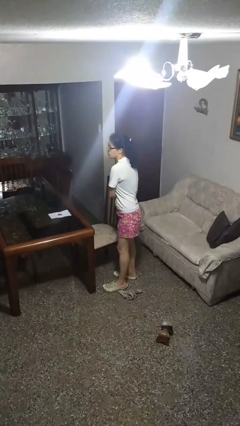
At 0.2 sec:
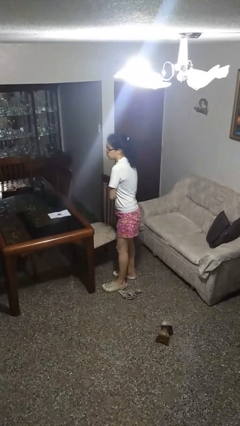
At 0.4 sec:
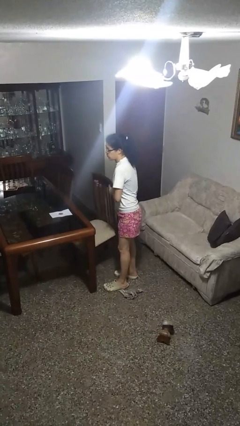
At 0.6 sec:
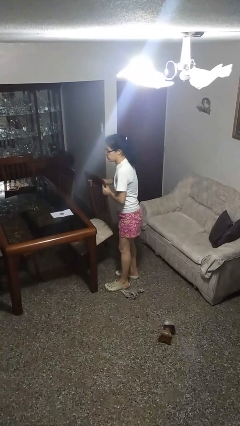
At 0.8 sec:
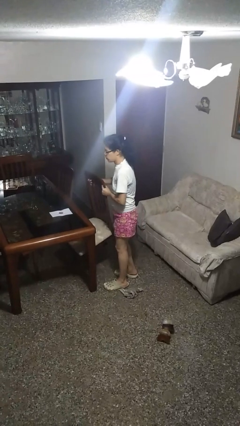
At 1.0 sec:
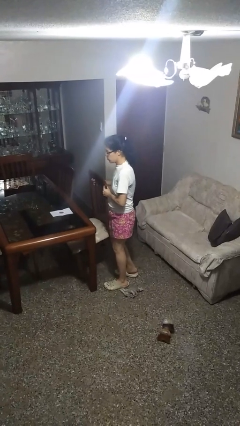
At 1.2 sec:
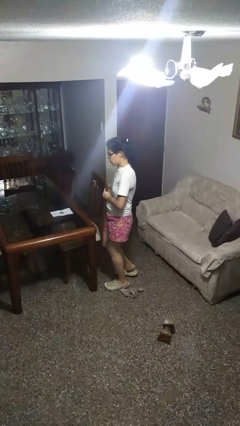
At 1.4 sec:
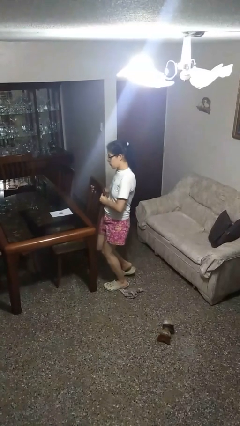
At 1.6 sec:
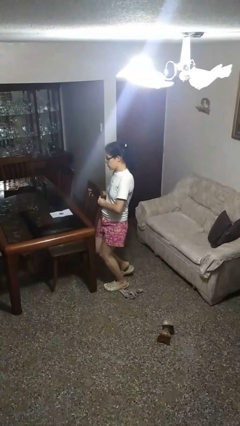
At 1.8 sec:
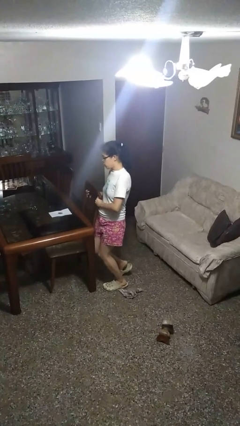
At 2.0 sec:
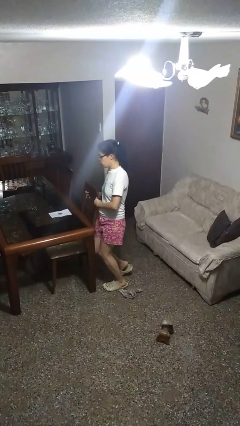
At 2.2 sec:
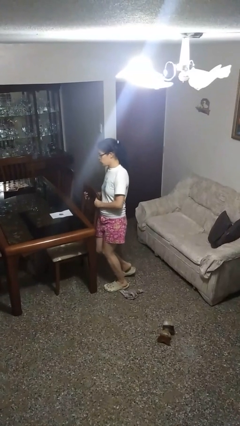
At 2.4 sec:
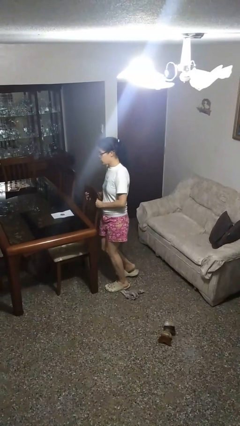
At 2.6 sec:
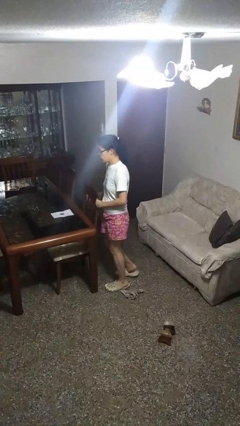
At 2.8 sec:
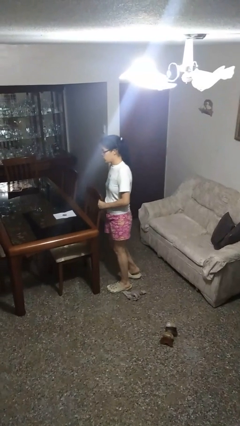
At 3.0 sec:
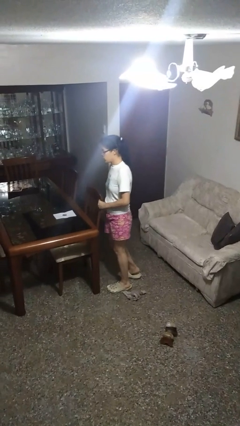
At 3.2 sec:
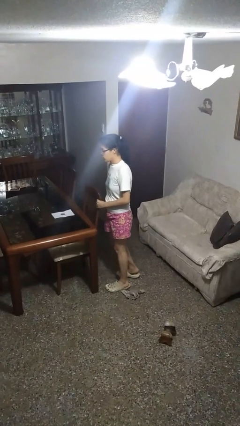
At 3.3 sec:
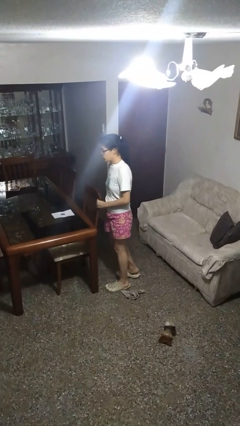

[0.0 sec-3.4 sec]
person pushes in chair

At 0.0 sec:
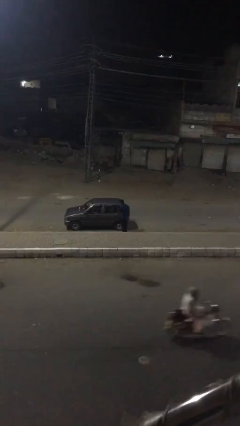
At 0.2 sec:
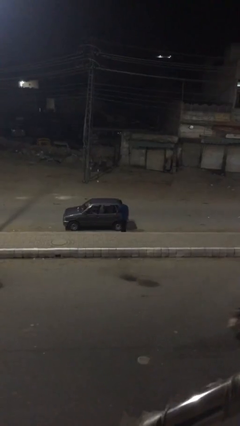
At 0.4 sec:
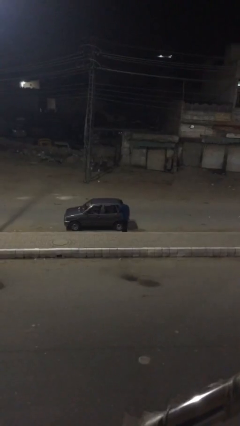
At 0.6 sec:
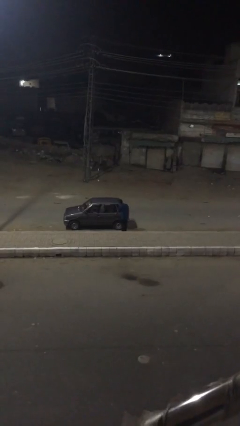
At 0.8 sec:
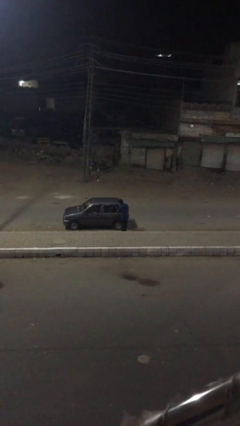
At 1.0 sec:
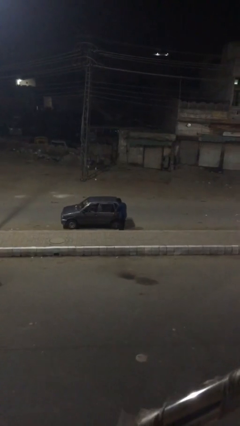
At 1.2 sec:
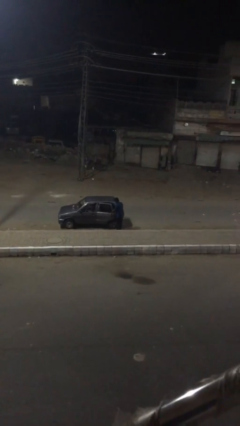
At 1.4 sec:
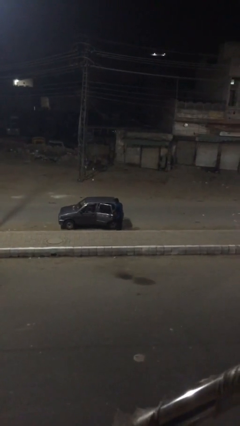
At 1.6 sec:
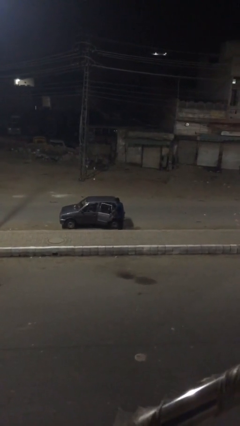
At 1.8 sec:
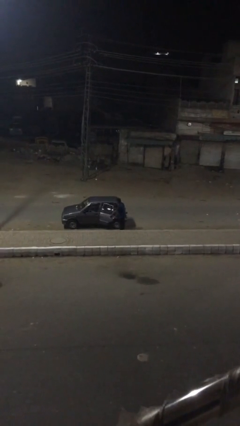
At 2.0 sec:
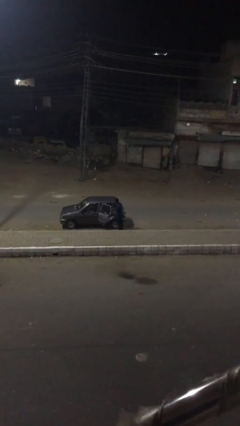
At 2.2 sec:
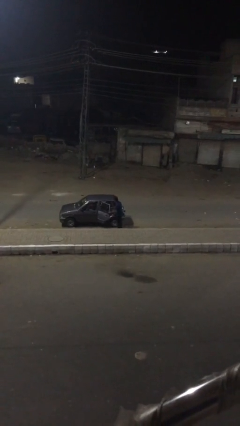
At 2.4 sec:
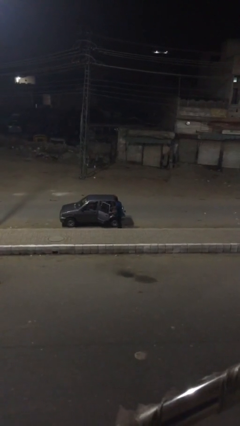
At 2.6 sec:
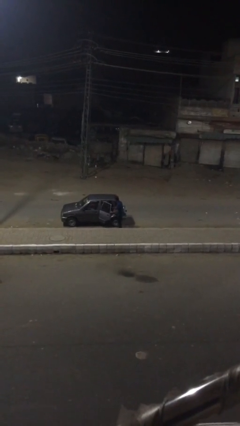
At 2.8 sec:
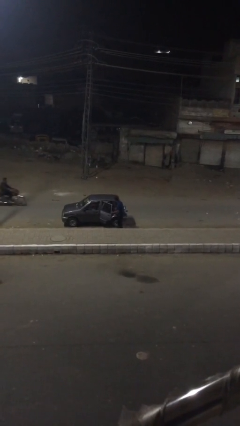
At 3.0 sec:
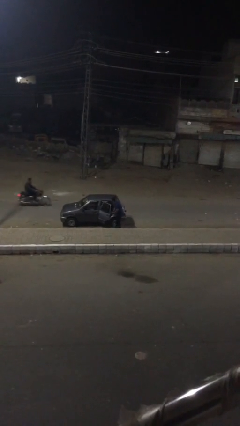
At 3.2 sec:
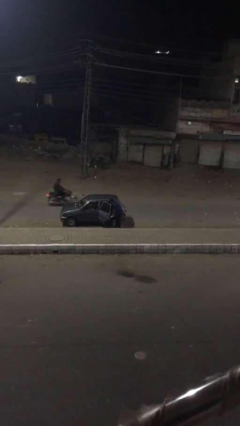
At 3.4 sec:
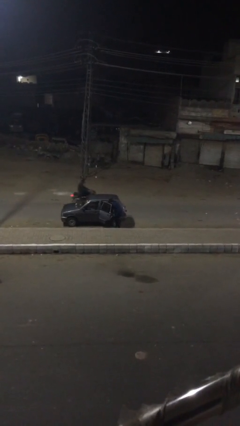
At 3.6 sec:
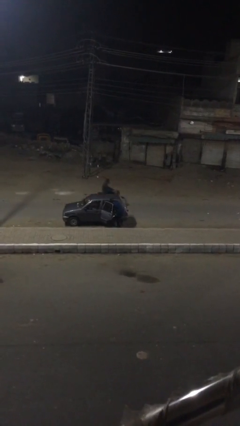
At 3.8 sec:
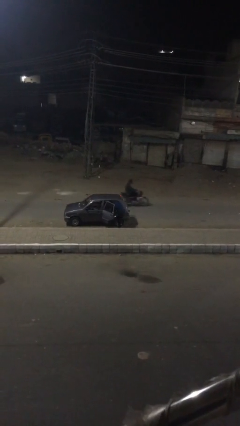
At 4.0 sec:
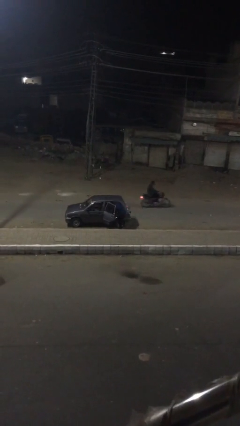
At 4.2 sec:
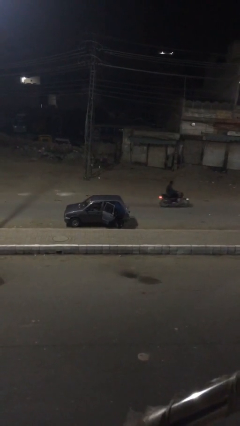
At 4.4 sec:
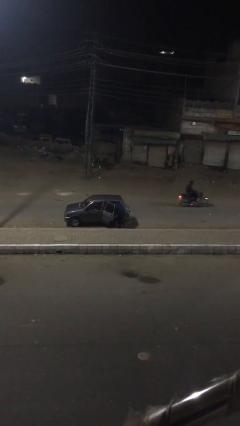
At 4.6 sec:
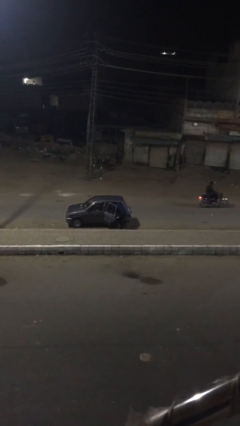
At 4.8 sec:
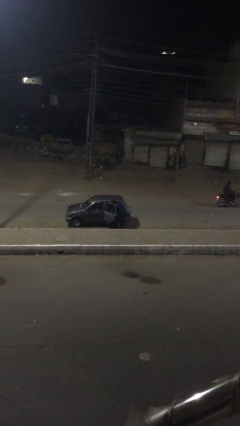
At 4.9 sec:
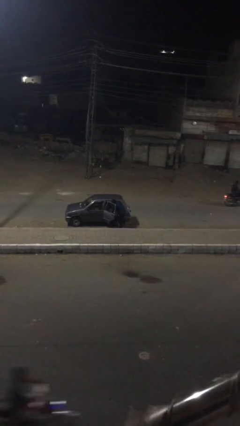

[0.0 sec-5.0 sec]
person opens car door

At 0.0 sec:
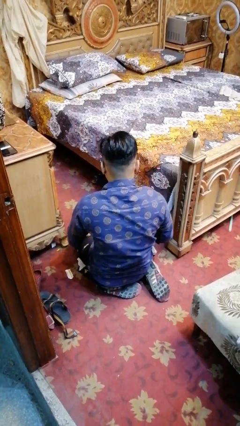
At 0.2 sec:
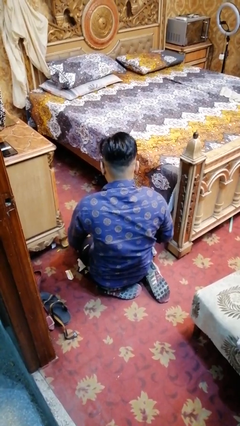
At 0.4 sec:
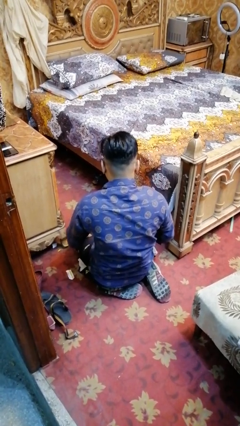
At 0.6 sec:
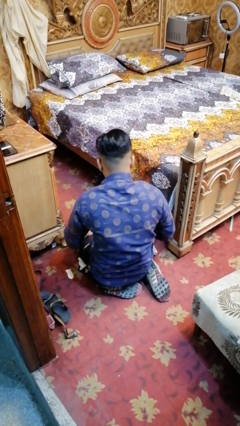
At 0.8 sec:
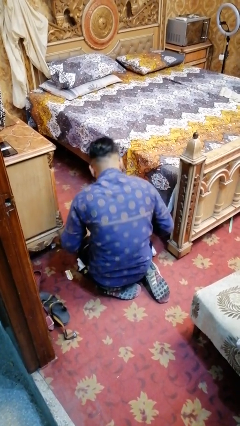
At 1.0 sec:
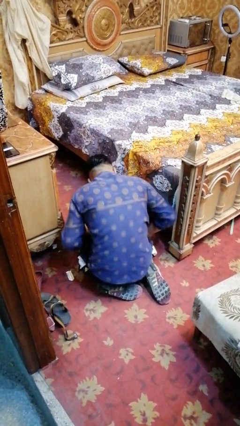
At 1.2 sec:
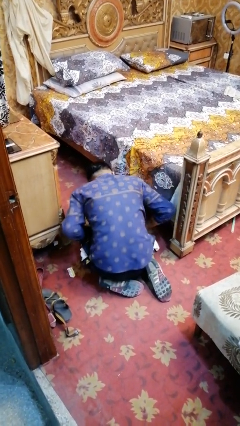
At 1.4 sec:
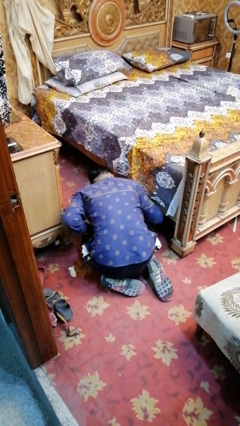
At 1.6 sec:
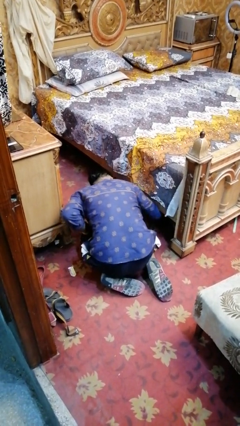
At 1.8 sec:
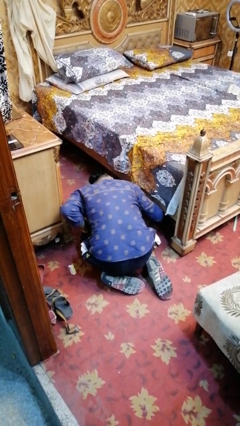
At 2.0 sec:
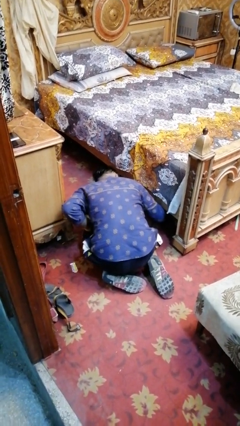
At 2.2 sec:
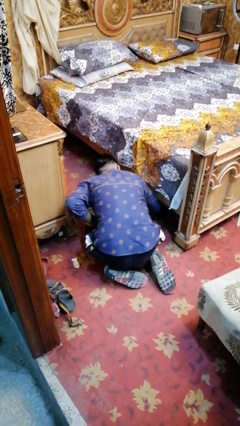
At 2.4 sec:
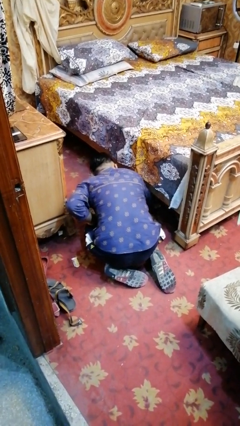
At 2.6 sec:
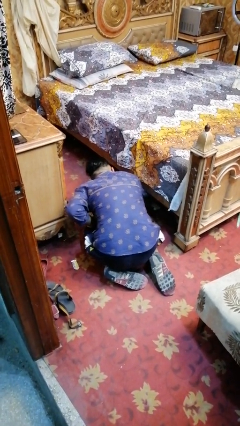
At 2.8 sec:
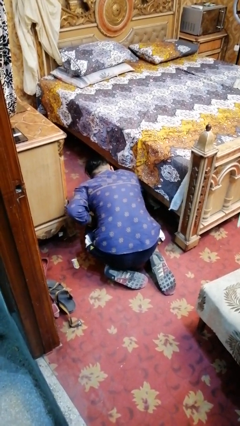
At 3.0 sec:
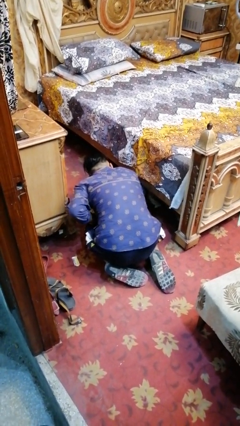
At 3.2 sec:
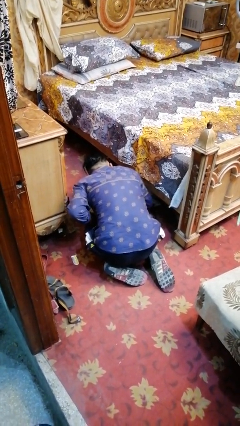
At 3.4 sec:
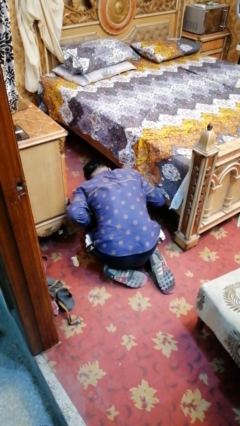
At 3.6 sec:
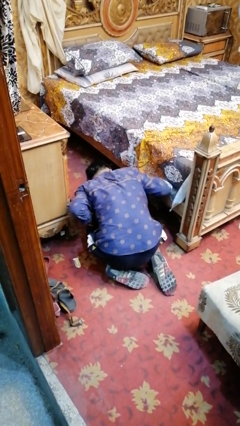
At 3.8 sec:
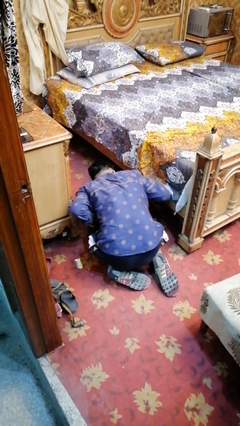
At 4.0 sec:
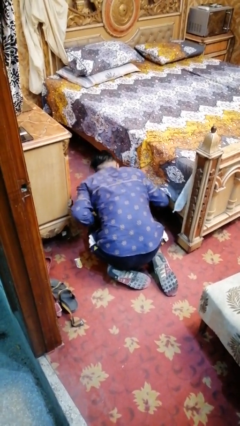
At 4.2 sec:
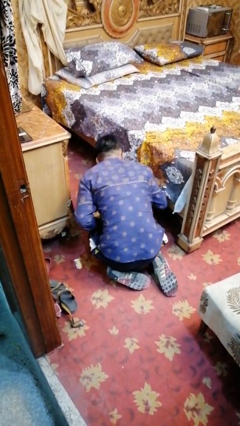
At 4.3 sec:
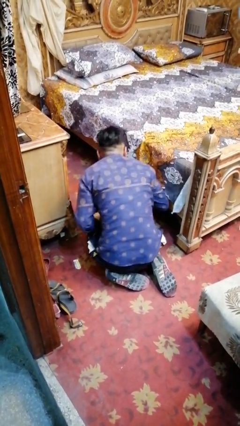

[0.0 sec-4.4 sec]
person searches under bed

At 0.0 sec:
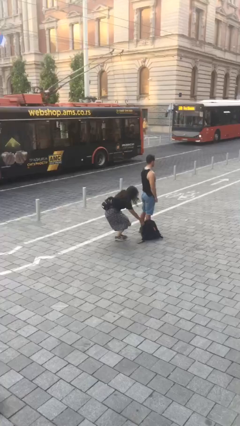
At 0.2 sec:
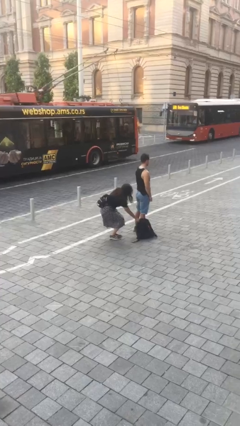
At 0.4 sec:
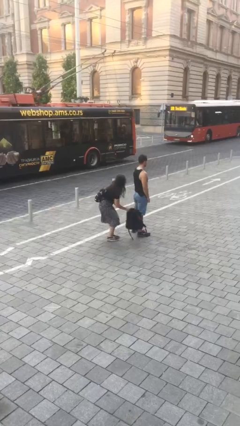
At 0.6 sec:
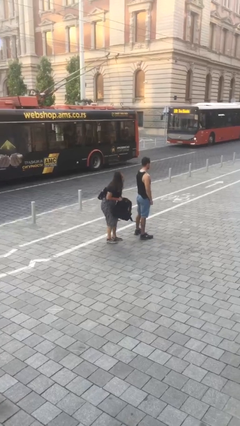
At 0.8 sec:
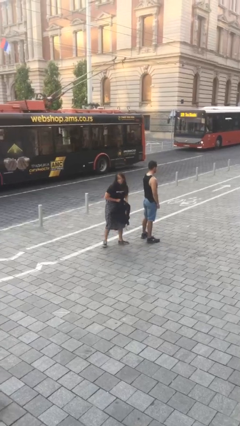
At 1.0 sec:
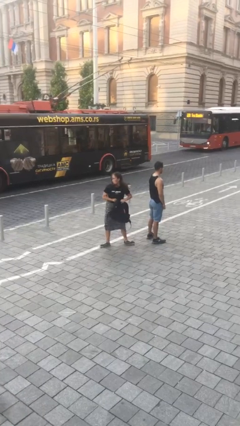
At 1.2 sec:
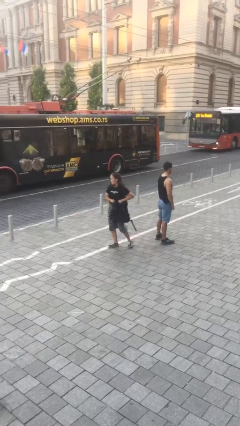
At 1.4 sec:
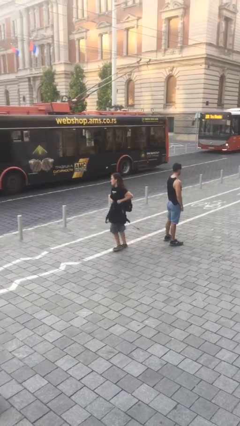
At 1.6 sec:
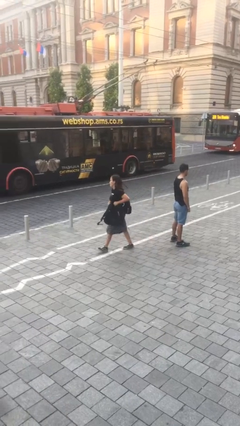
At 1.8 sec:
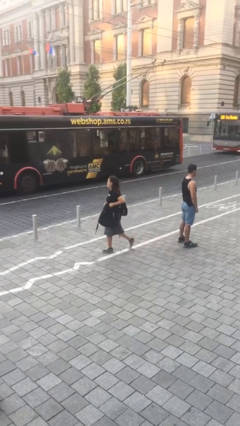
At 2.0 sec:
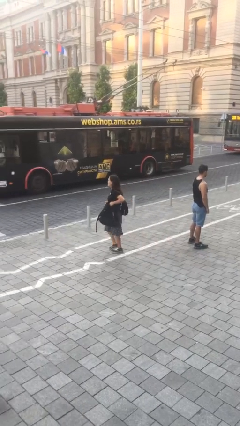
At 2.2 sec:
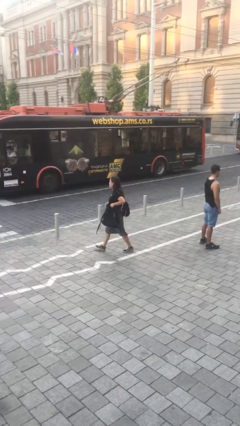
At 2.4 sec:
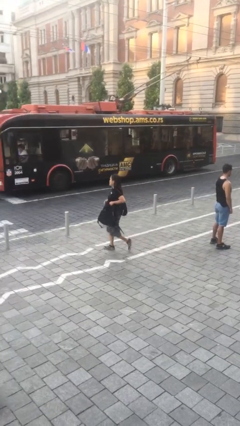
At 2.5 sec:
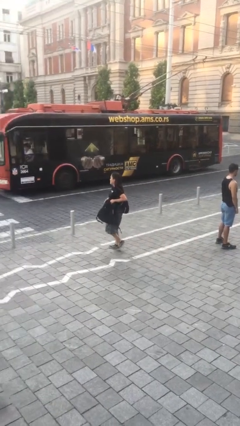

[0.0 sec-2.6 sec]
person steals object from person

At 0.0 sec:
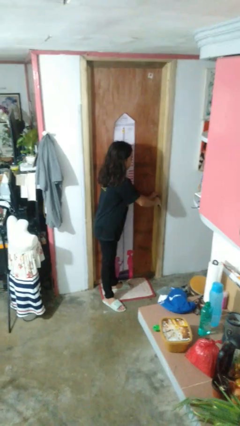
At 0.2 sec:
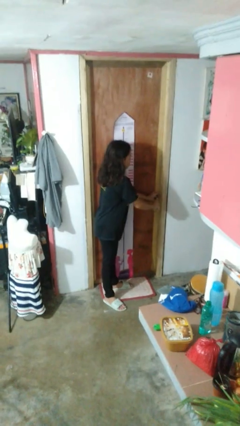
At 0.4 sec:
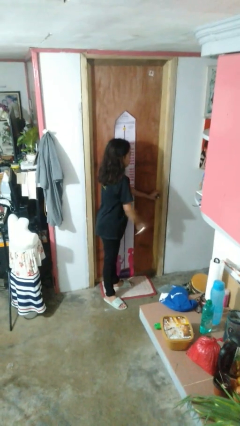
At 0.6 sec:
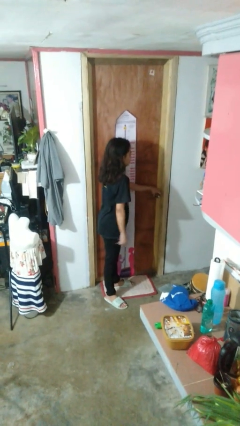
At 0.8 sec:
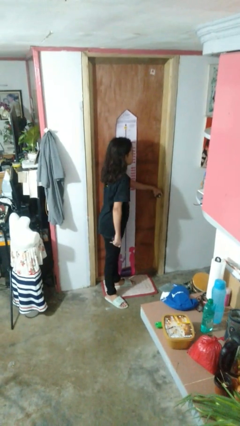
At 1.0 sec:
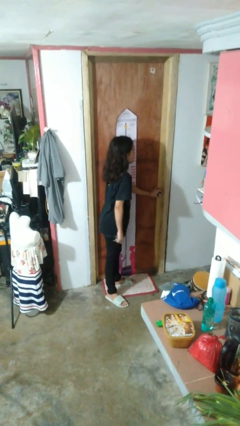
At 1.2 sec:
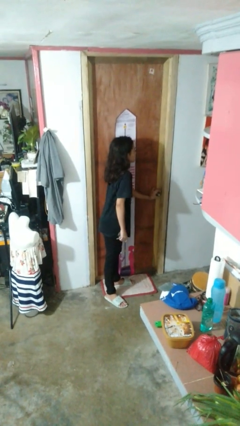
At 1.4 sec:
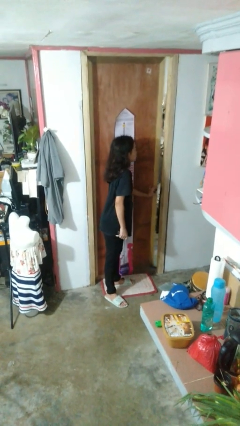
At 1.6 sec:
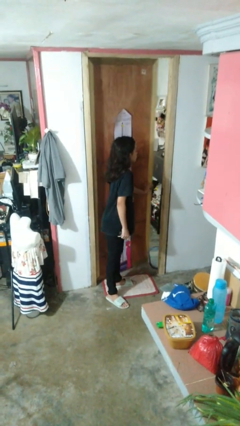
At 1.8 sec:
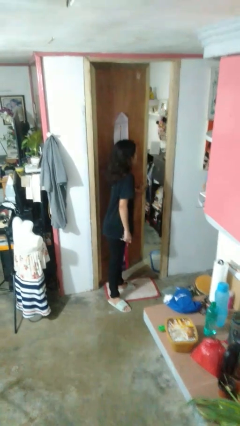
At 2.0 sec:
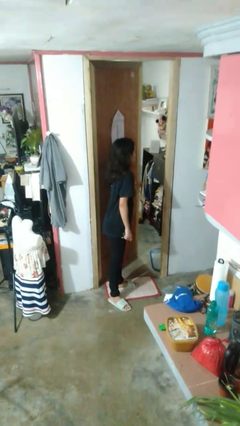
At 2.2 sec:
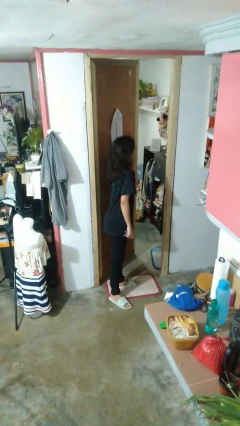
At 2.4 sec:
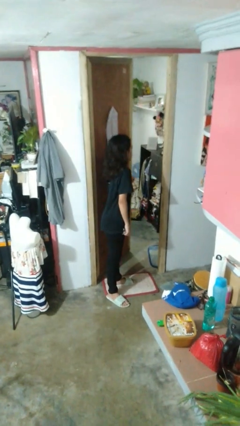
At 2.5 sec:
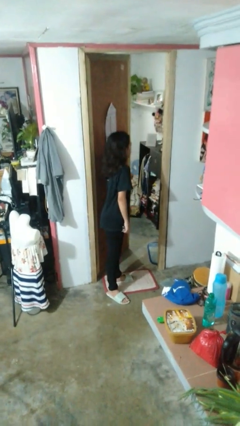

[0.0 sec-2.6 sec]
person opens facility door
